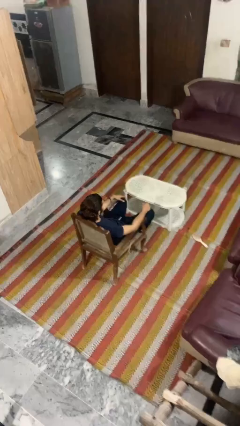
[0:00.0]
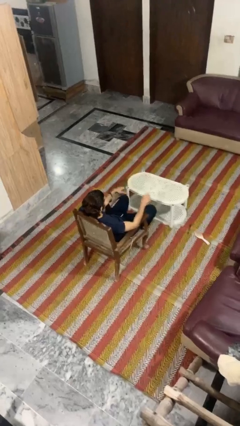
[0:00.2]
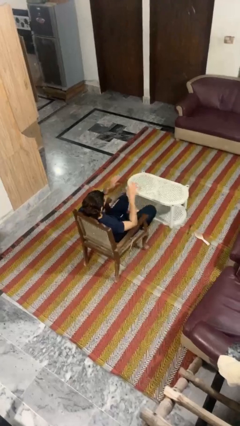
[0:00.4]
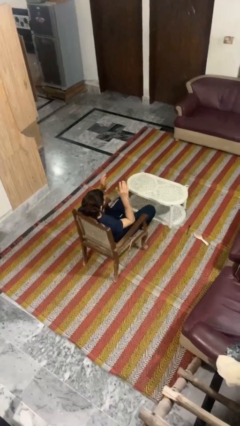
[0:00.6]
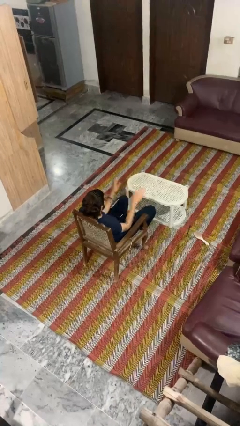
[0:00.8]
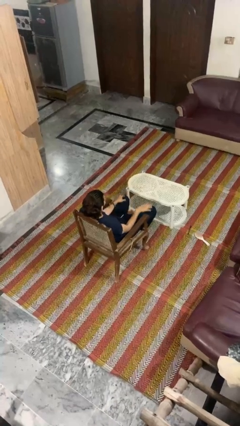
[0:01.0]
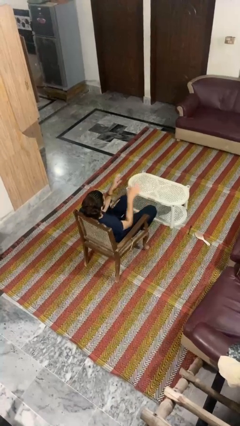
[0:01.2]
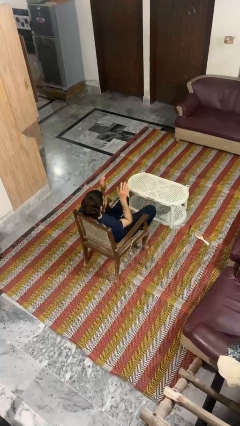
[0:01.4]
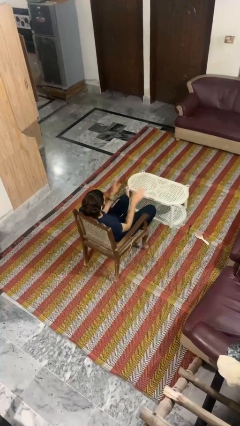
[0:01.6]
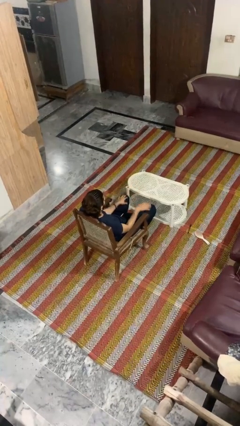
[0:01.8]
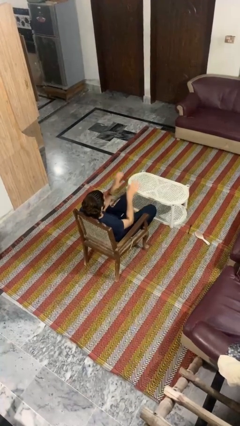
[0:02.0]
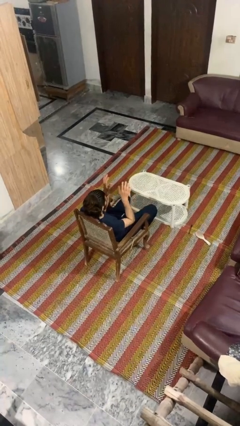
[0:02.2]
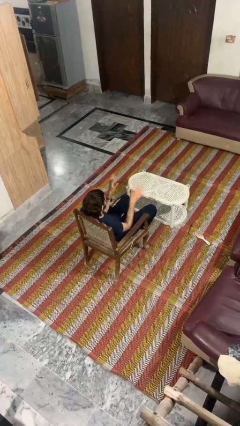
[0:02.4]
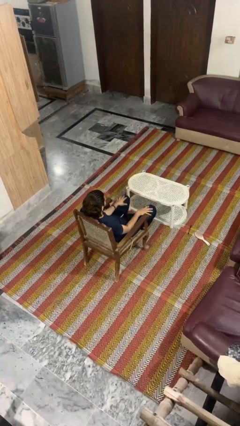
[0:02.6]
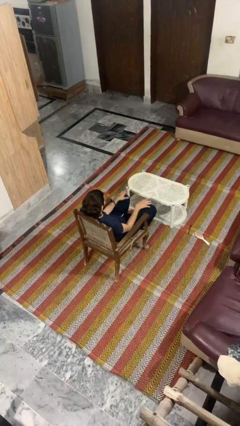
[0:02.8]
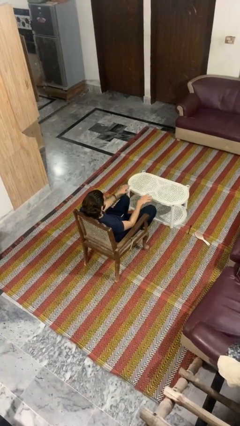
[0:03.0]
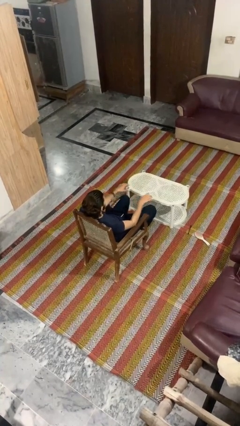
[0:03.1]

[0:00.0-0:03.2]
person slaps hands on thighs

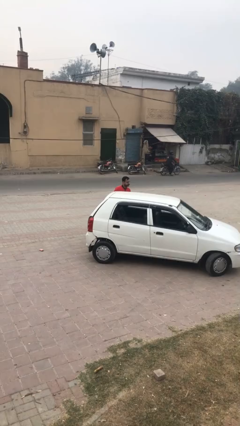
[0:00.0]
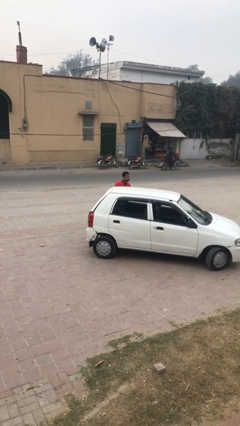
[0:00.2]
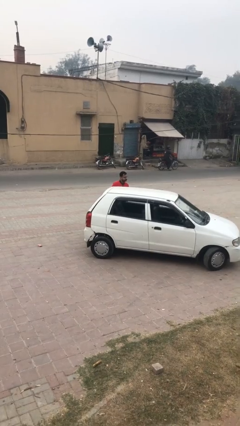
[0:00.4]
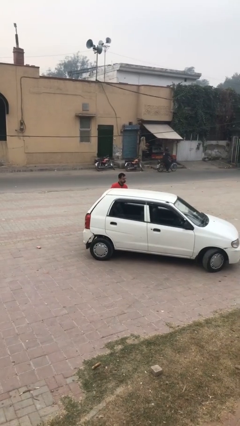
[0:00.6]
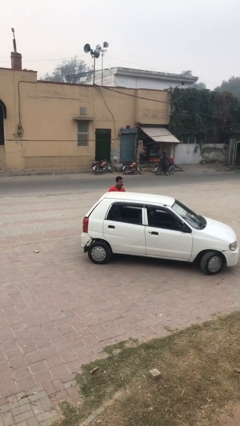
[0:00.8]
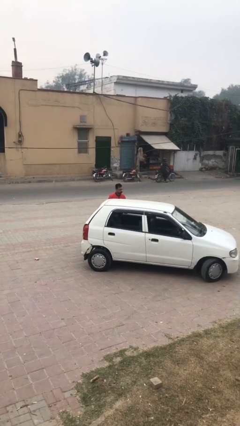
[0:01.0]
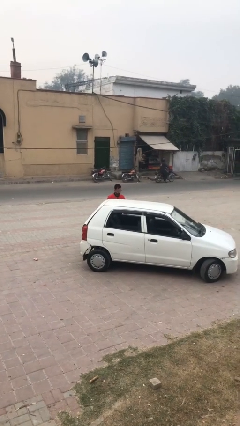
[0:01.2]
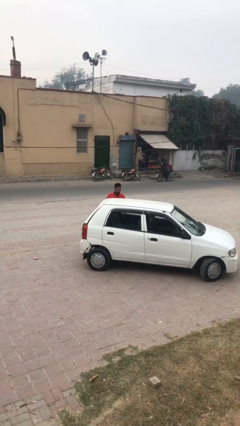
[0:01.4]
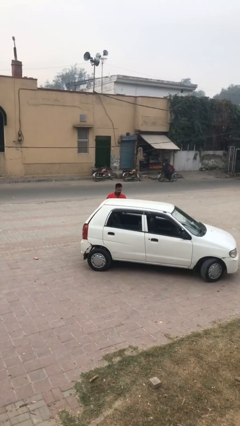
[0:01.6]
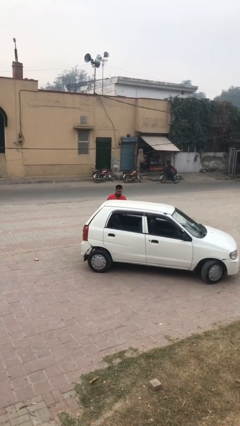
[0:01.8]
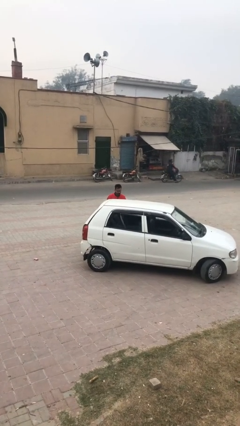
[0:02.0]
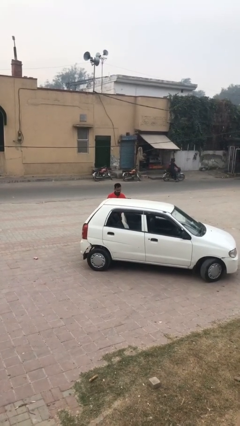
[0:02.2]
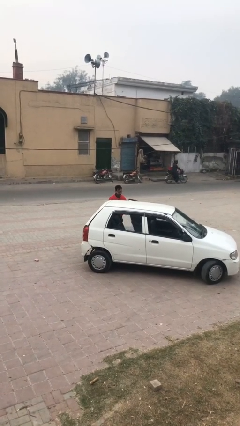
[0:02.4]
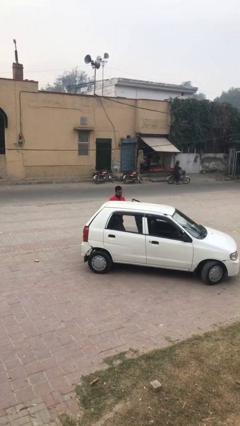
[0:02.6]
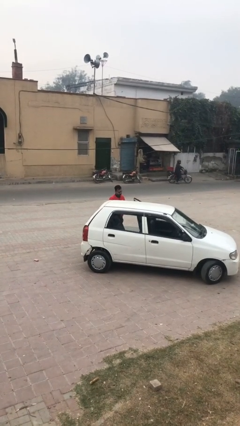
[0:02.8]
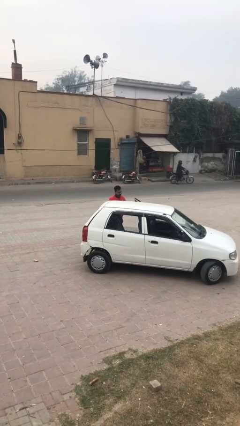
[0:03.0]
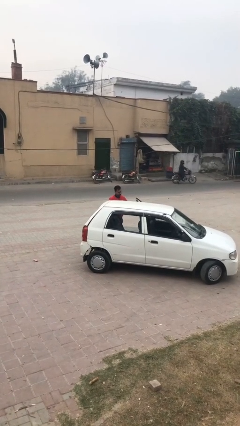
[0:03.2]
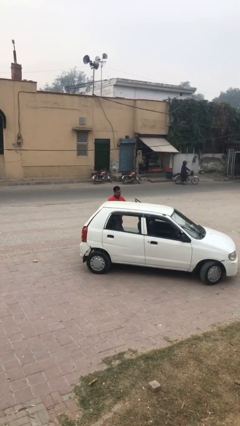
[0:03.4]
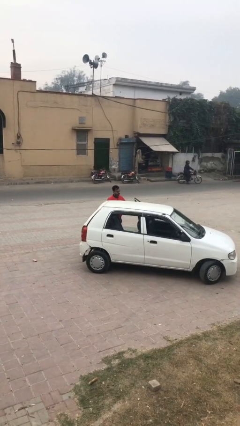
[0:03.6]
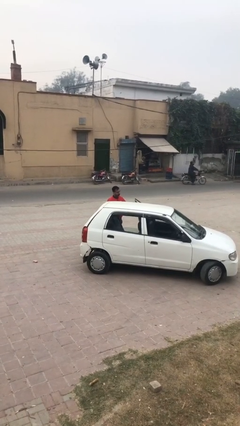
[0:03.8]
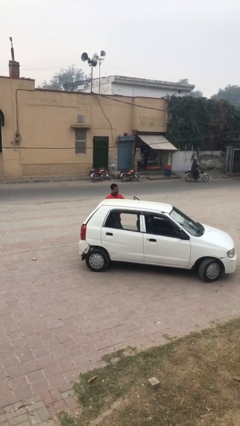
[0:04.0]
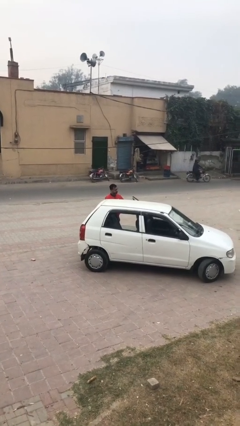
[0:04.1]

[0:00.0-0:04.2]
person opens car door

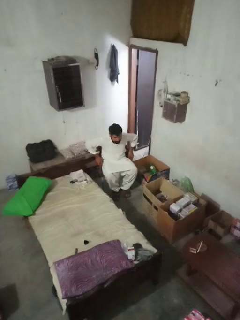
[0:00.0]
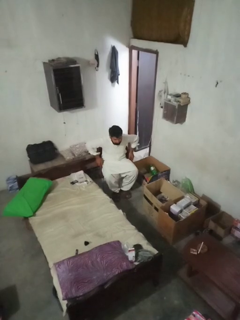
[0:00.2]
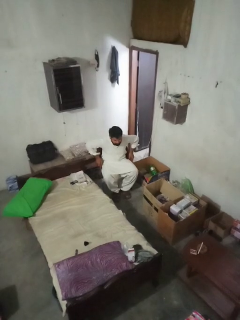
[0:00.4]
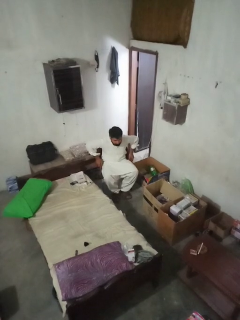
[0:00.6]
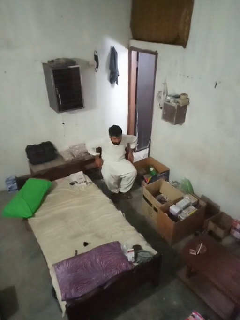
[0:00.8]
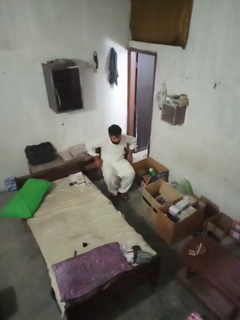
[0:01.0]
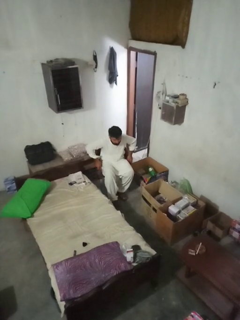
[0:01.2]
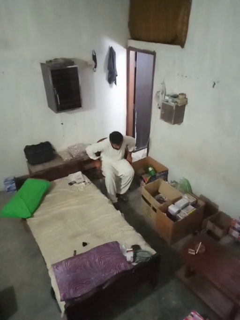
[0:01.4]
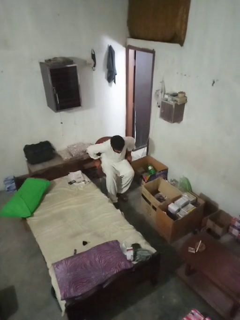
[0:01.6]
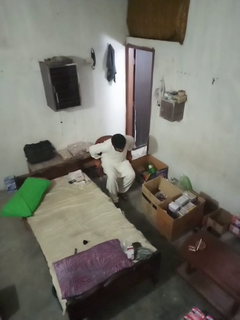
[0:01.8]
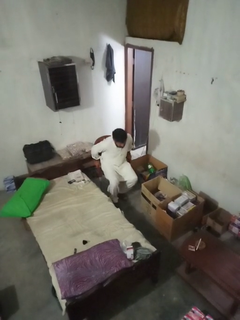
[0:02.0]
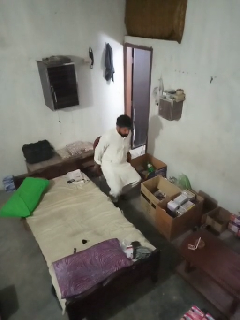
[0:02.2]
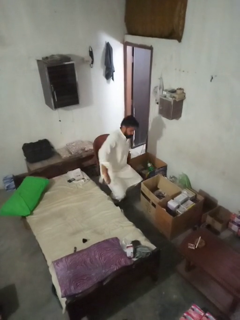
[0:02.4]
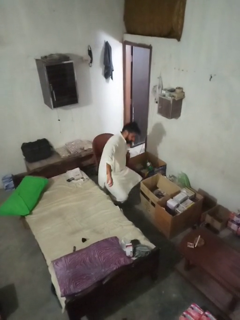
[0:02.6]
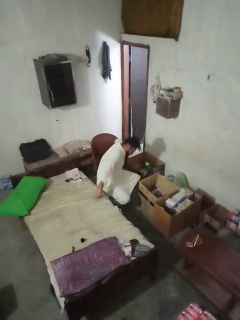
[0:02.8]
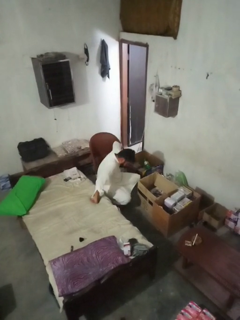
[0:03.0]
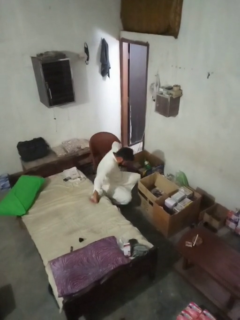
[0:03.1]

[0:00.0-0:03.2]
person falls from chair

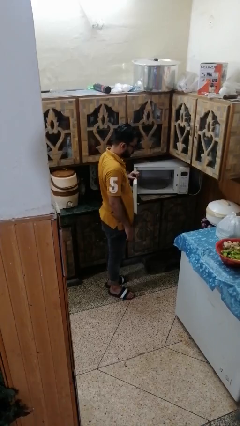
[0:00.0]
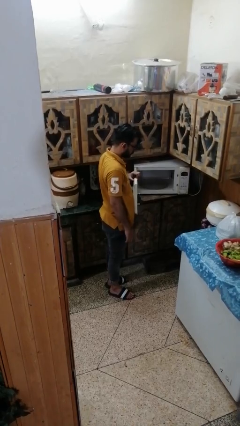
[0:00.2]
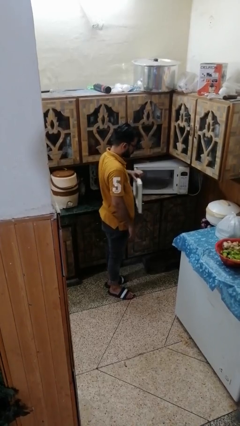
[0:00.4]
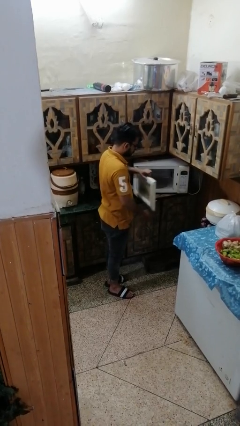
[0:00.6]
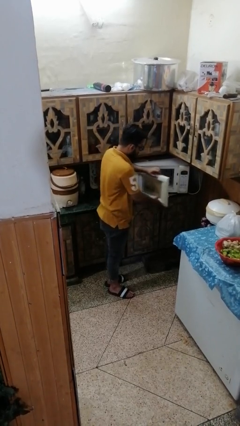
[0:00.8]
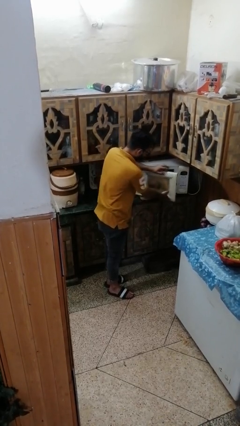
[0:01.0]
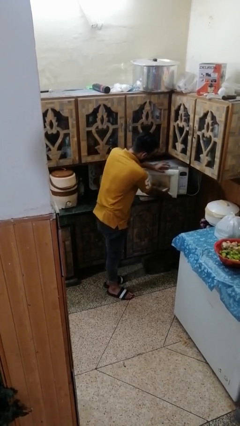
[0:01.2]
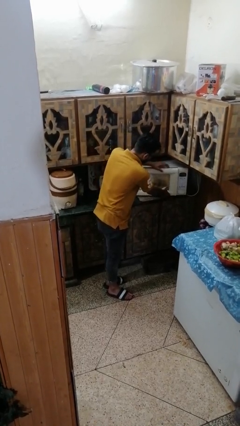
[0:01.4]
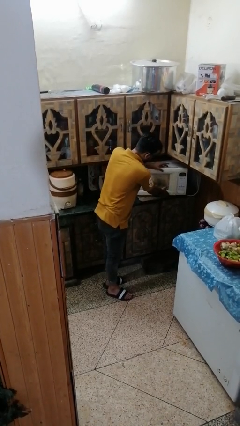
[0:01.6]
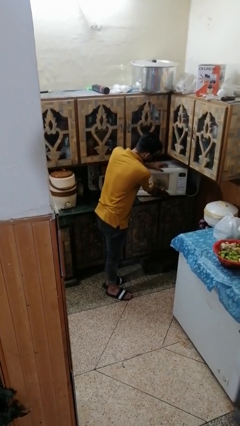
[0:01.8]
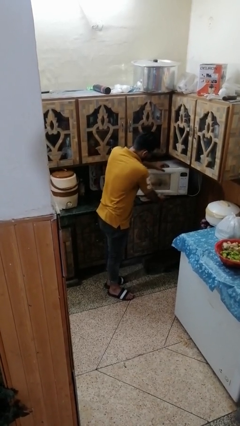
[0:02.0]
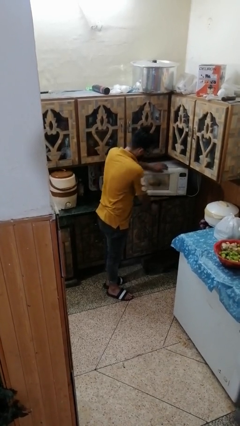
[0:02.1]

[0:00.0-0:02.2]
person closes microwave

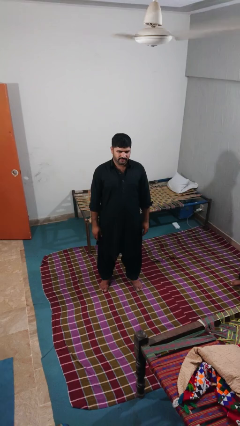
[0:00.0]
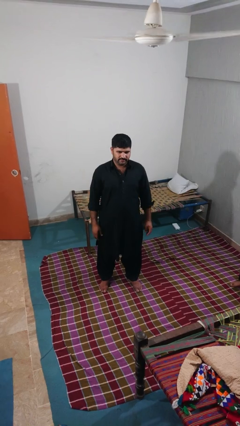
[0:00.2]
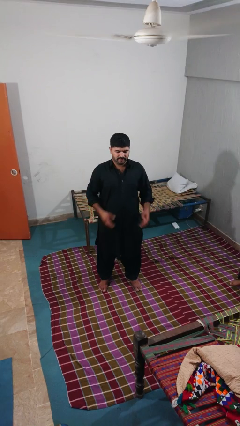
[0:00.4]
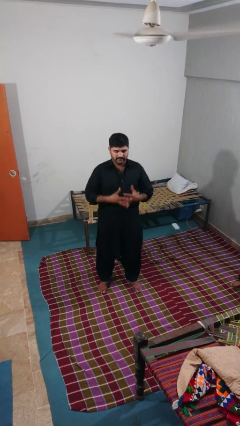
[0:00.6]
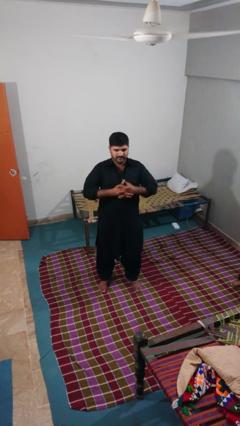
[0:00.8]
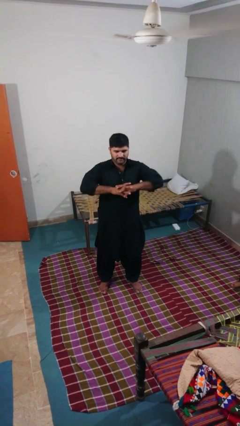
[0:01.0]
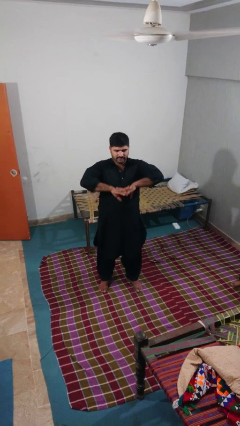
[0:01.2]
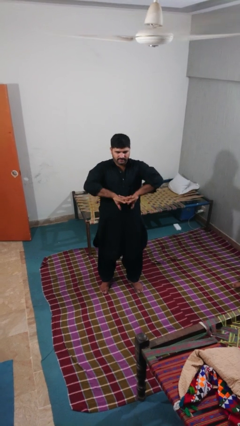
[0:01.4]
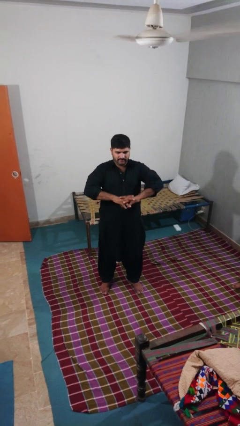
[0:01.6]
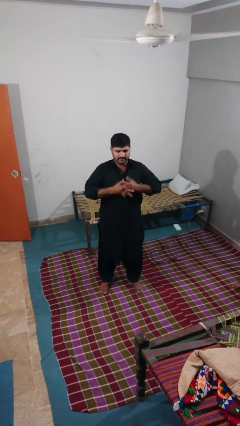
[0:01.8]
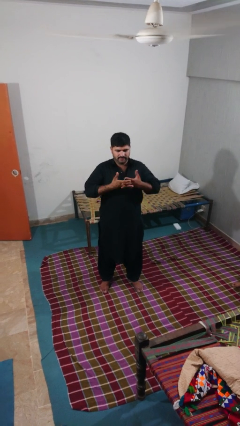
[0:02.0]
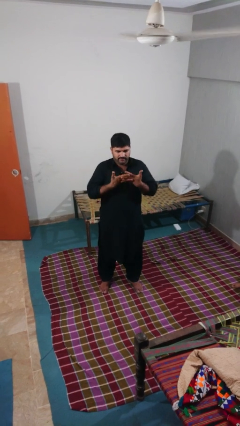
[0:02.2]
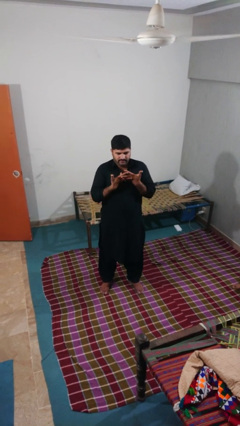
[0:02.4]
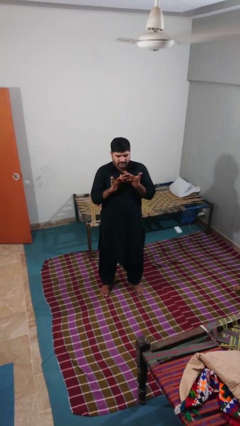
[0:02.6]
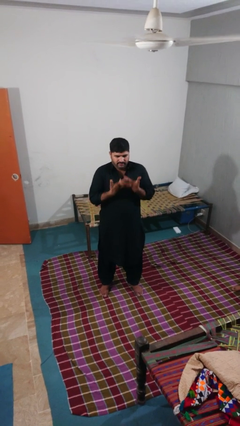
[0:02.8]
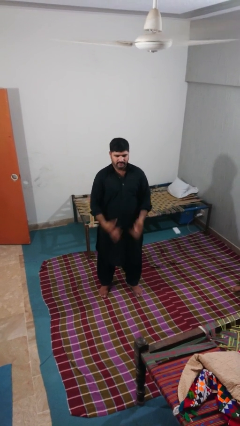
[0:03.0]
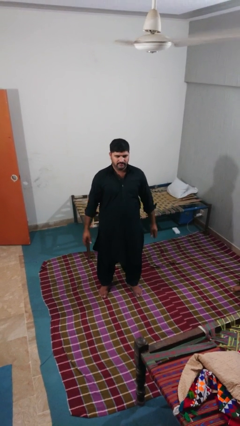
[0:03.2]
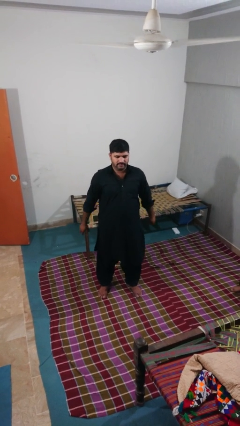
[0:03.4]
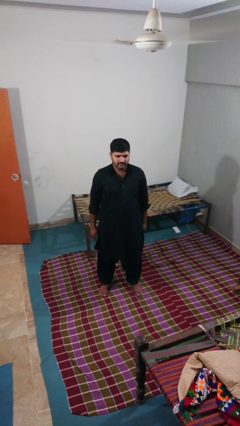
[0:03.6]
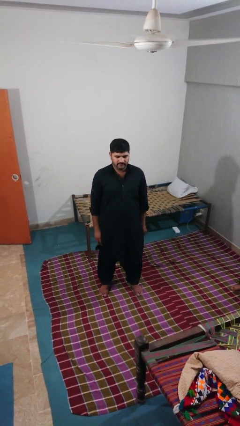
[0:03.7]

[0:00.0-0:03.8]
person cracks knuckles

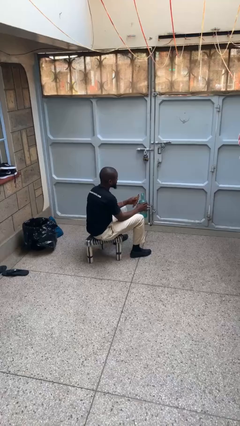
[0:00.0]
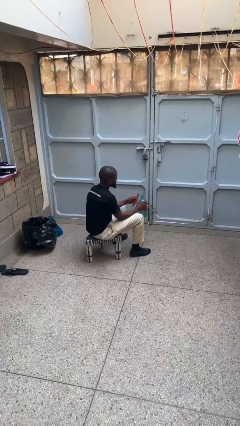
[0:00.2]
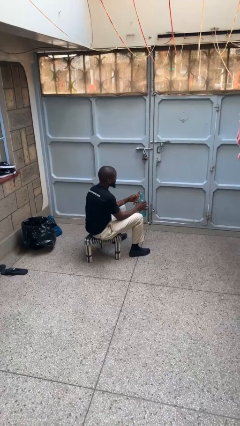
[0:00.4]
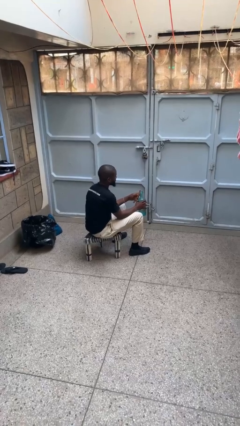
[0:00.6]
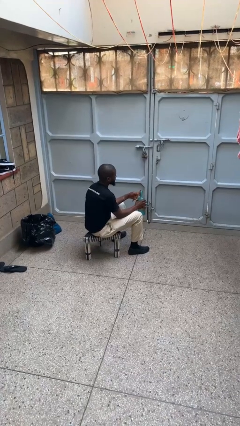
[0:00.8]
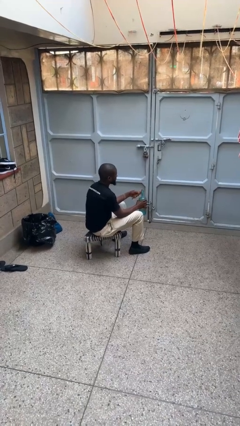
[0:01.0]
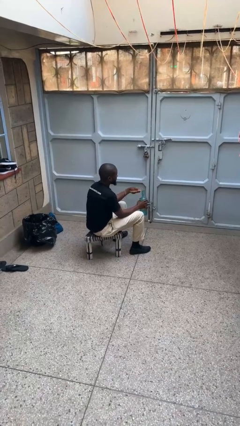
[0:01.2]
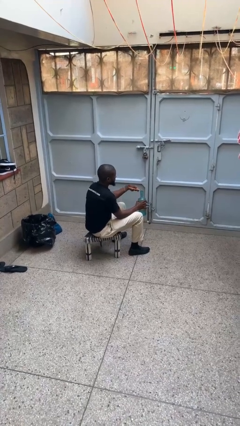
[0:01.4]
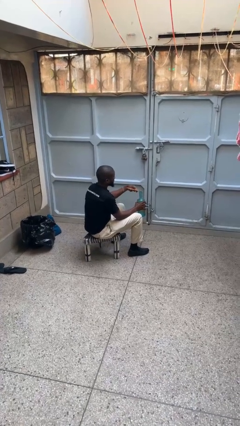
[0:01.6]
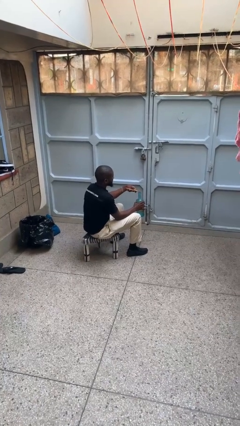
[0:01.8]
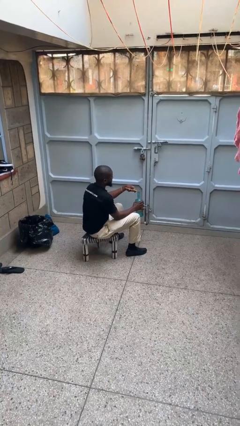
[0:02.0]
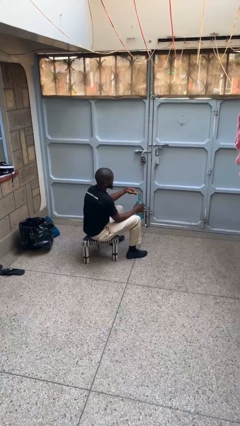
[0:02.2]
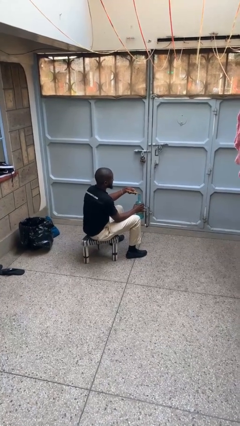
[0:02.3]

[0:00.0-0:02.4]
person opens can with can opener
